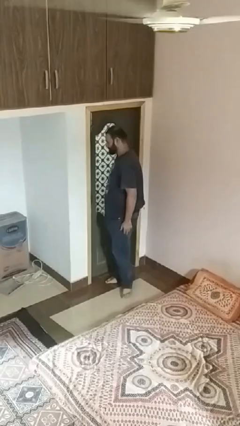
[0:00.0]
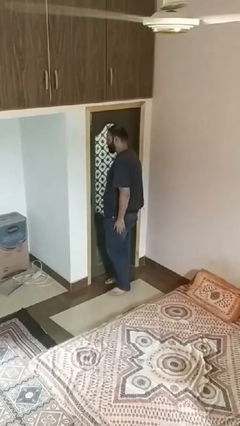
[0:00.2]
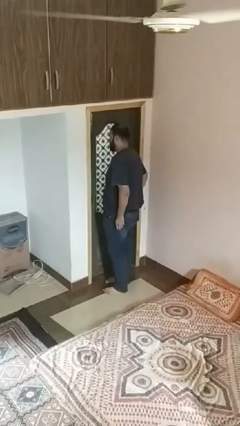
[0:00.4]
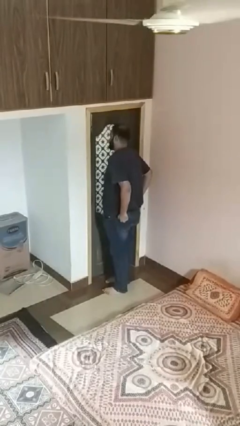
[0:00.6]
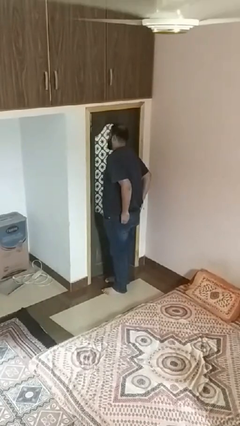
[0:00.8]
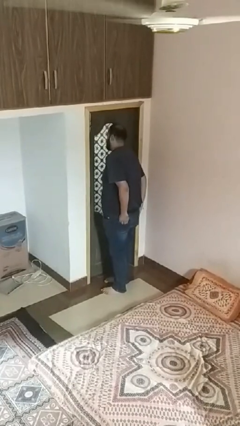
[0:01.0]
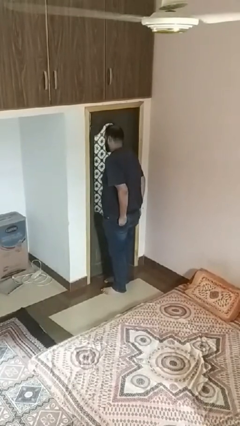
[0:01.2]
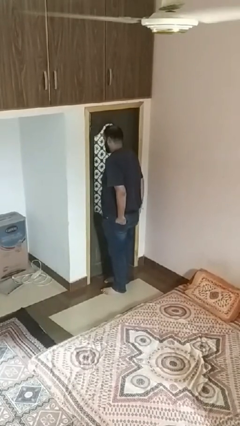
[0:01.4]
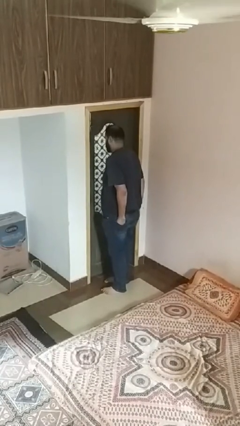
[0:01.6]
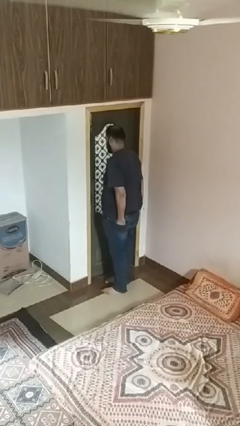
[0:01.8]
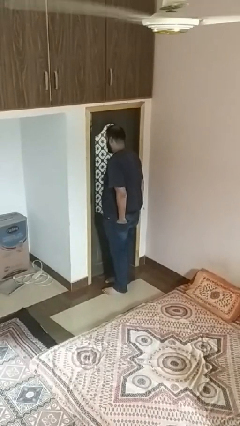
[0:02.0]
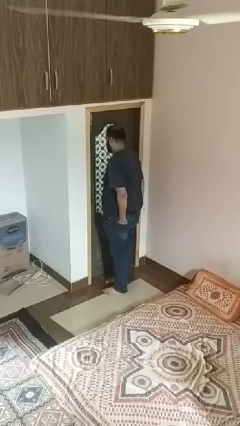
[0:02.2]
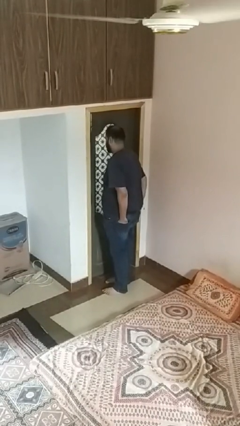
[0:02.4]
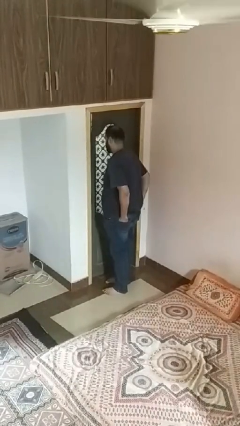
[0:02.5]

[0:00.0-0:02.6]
person puts hands in back pockets

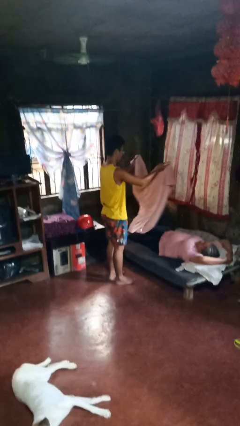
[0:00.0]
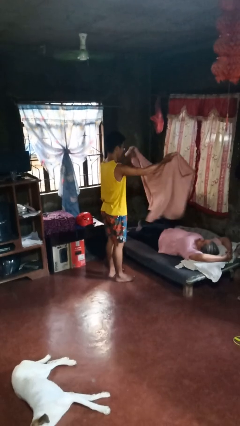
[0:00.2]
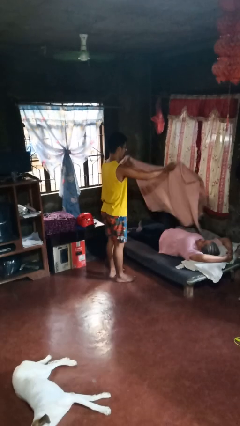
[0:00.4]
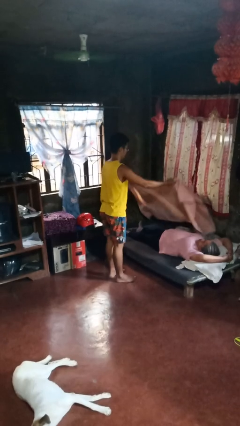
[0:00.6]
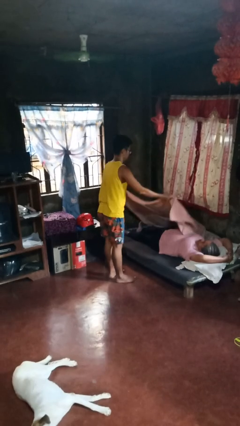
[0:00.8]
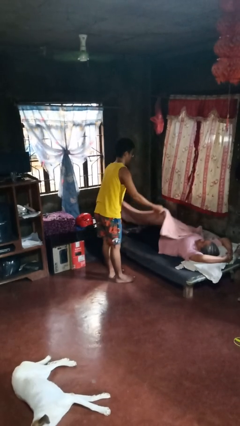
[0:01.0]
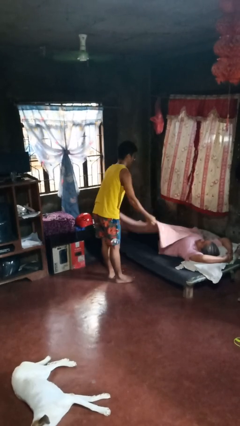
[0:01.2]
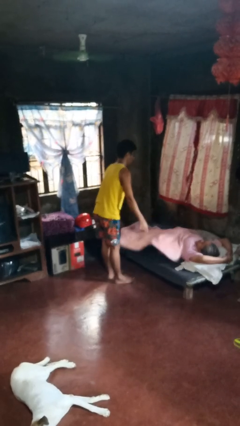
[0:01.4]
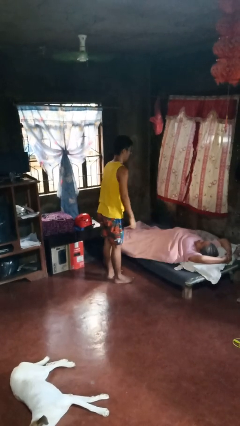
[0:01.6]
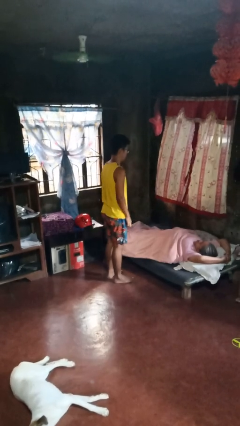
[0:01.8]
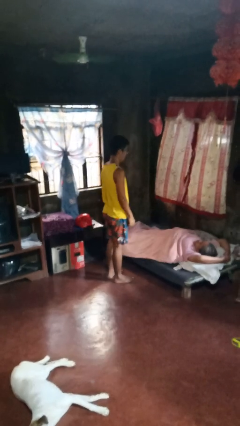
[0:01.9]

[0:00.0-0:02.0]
person covers friend with blanket

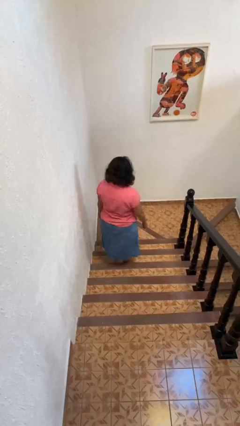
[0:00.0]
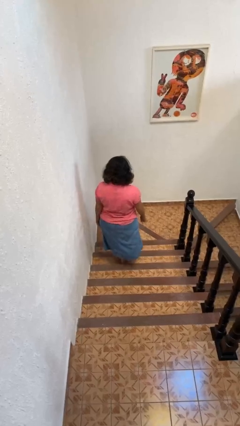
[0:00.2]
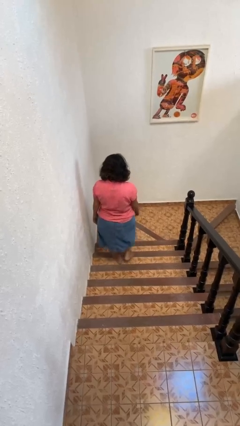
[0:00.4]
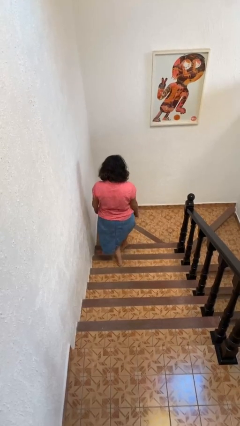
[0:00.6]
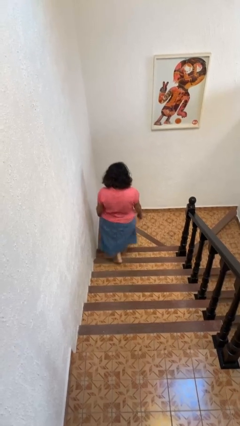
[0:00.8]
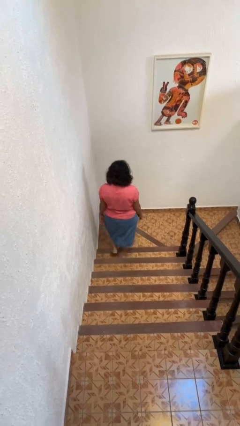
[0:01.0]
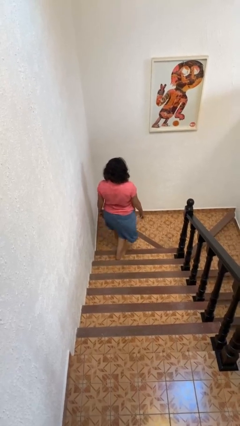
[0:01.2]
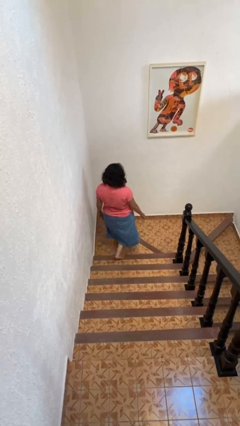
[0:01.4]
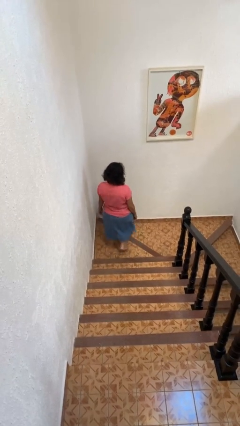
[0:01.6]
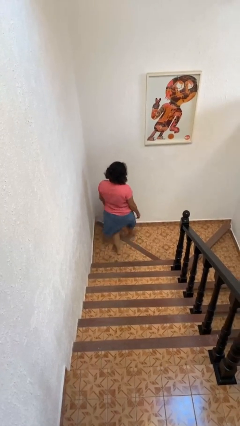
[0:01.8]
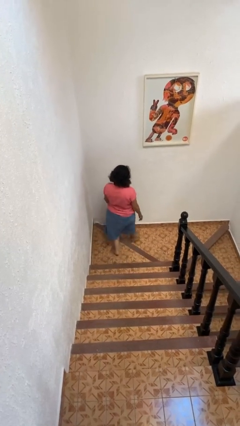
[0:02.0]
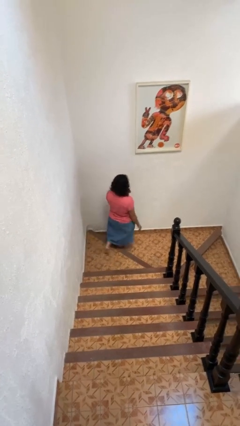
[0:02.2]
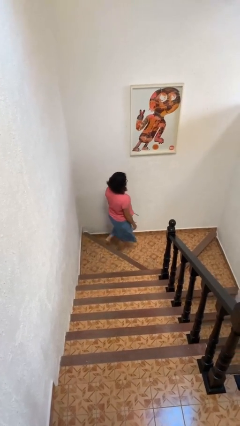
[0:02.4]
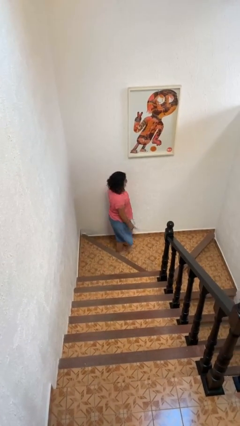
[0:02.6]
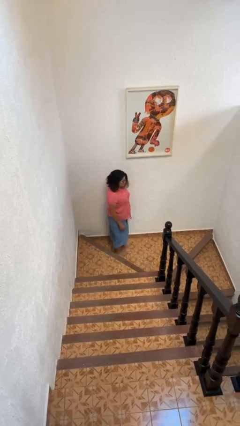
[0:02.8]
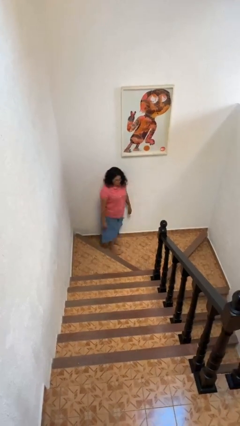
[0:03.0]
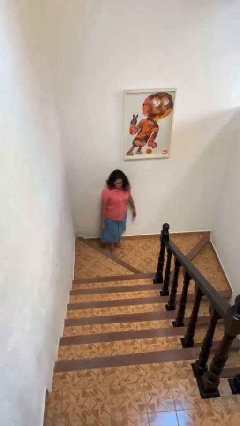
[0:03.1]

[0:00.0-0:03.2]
person climbs down stairs

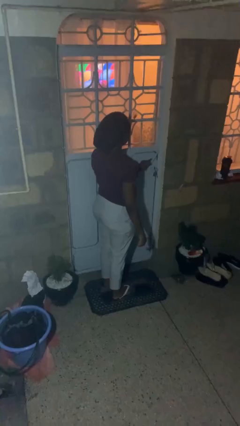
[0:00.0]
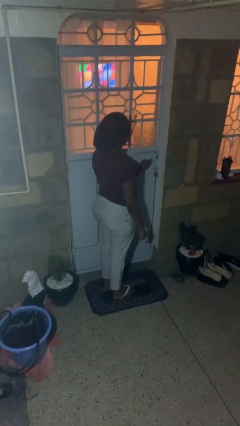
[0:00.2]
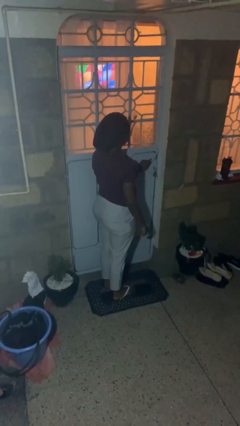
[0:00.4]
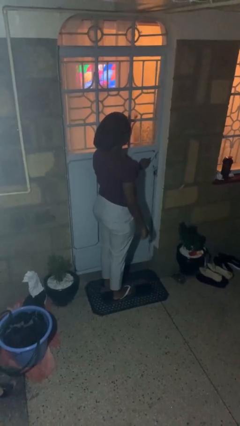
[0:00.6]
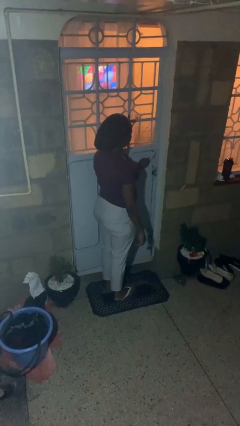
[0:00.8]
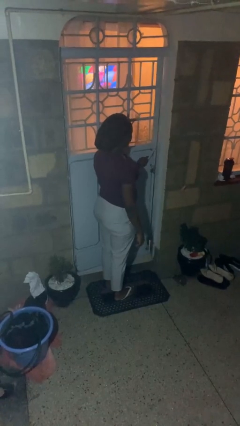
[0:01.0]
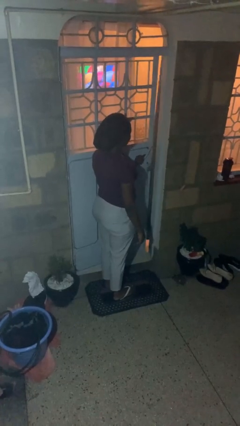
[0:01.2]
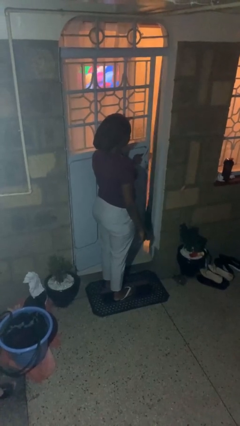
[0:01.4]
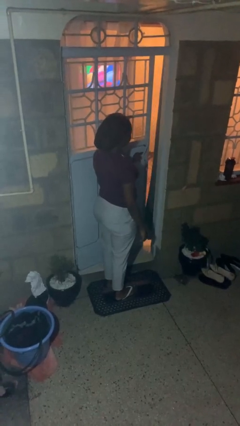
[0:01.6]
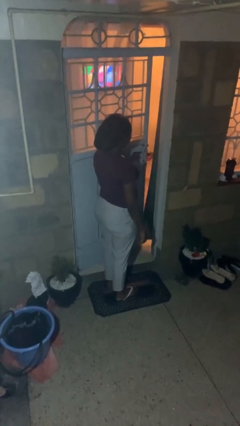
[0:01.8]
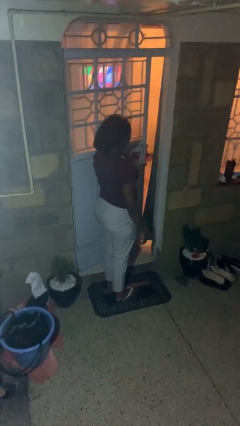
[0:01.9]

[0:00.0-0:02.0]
person opens facility door

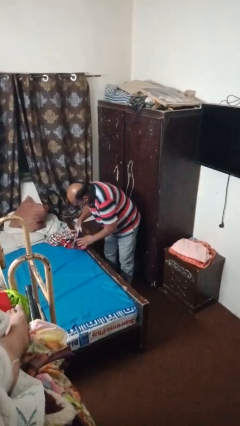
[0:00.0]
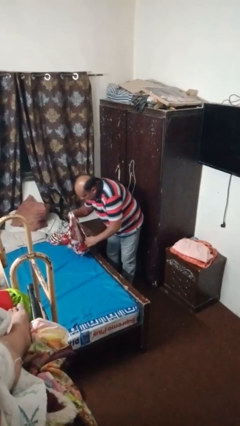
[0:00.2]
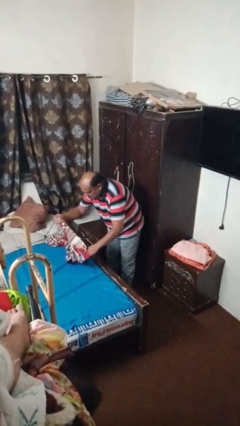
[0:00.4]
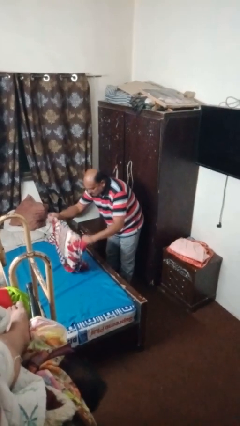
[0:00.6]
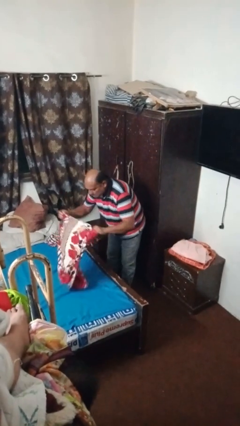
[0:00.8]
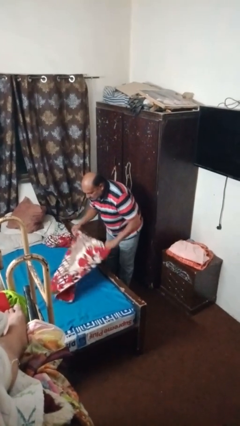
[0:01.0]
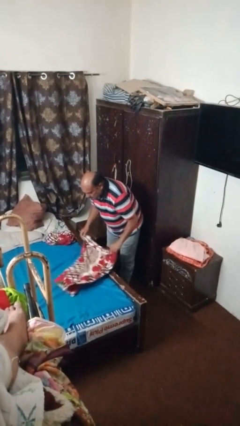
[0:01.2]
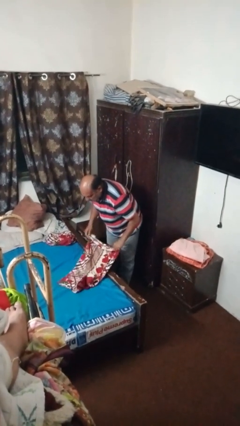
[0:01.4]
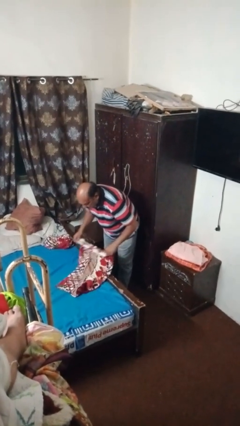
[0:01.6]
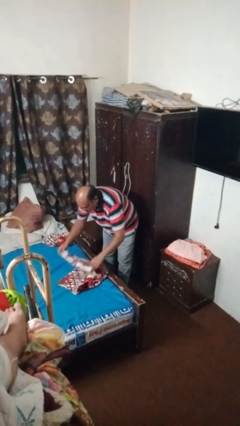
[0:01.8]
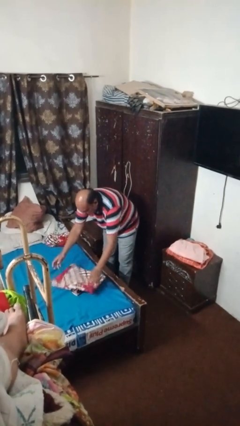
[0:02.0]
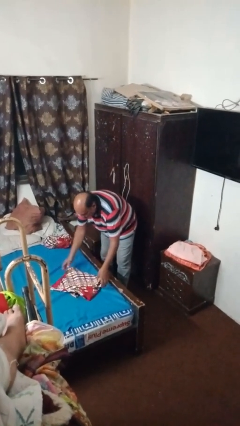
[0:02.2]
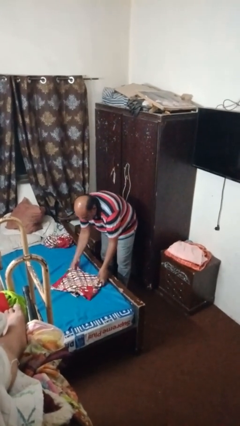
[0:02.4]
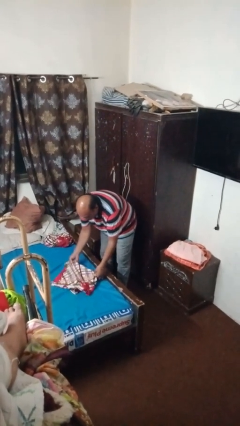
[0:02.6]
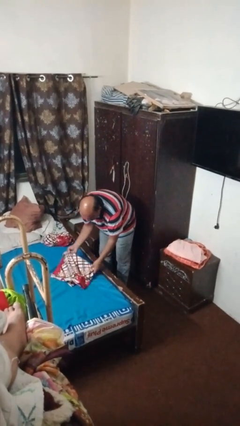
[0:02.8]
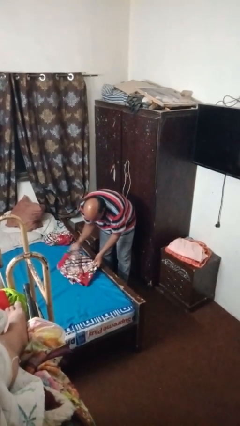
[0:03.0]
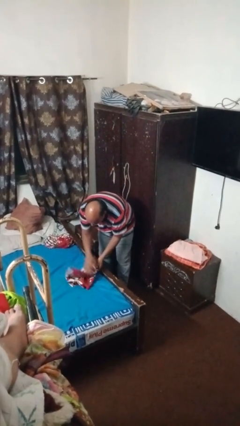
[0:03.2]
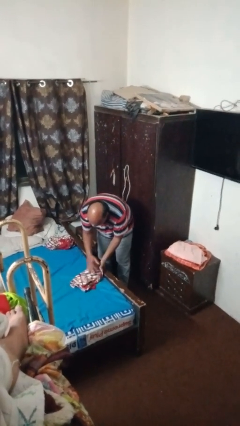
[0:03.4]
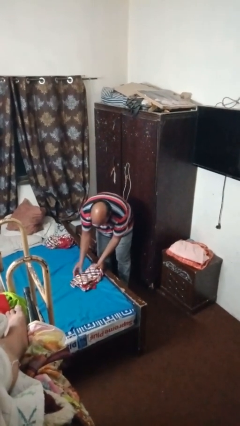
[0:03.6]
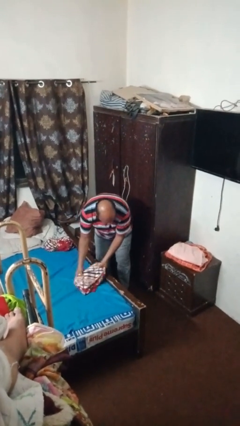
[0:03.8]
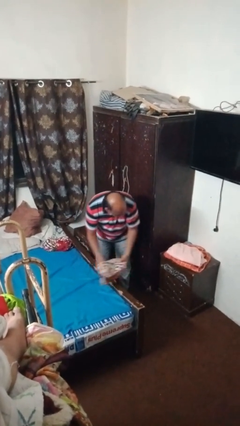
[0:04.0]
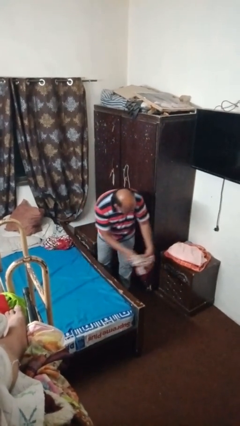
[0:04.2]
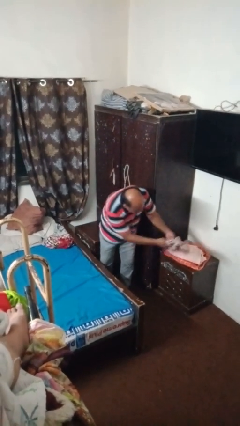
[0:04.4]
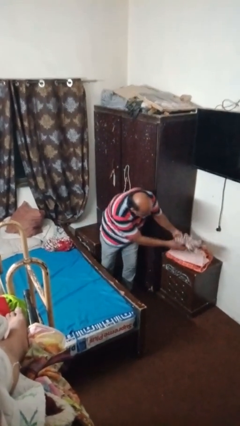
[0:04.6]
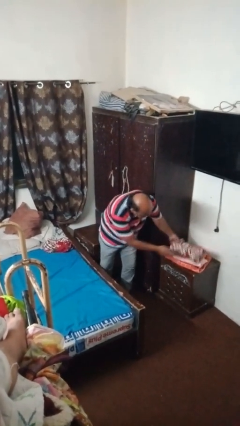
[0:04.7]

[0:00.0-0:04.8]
person folds towel

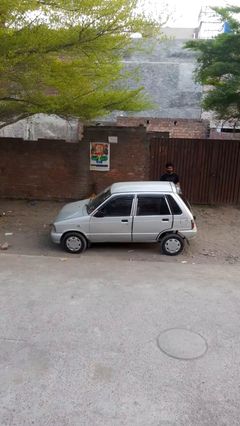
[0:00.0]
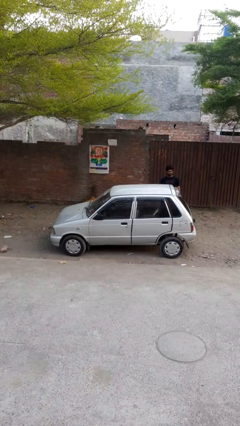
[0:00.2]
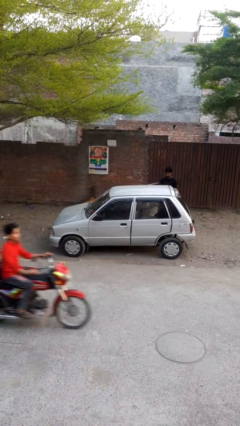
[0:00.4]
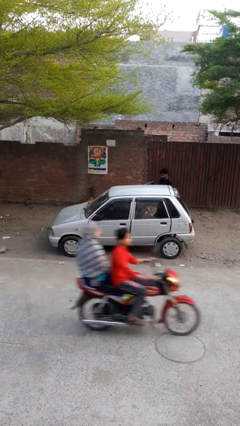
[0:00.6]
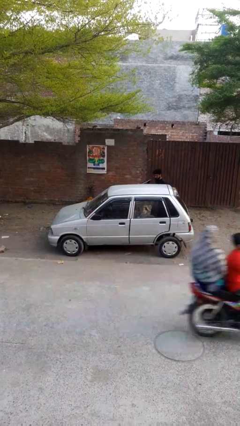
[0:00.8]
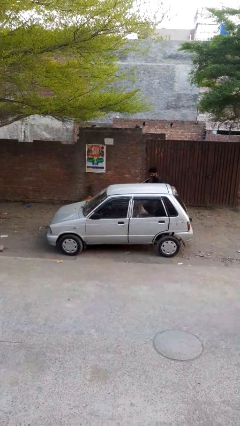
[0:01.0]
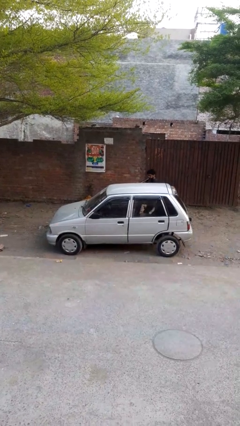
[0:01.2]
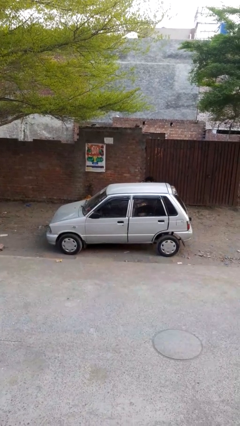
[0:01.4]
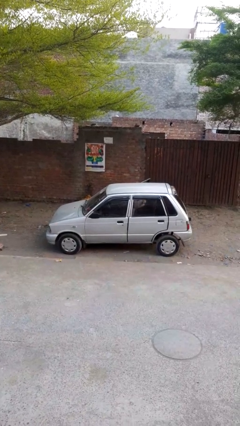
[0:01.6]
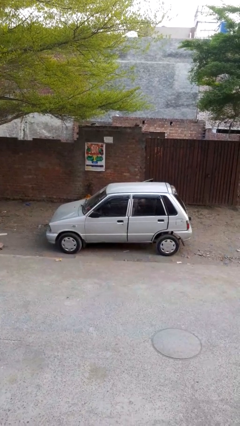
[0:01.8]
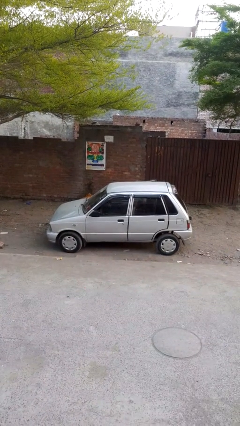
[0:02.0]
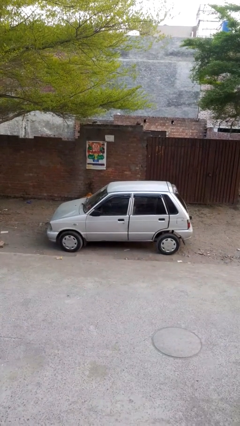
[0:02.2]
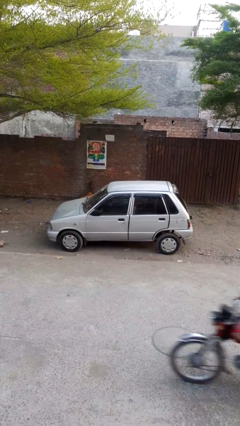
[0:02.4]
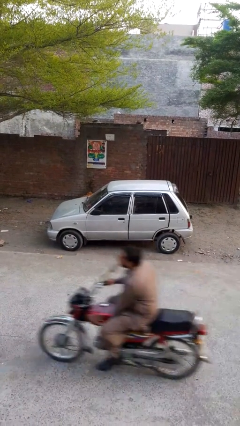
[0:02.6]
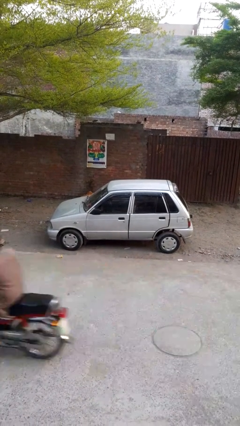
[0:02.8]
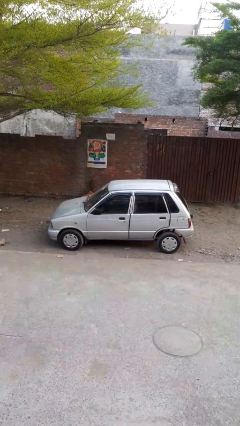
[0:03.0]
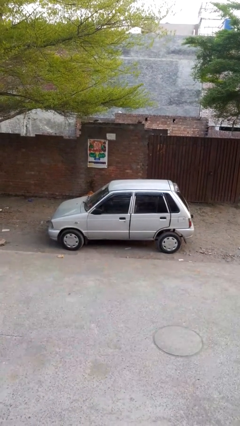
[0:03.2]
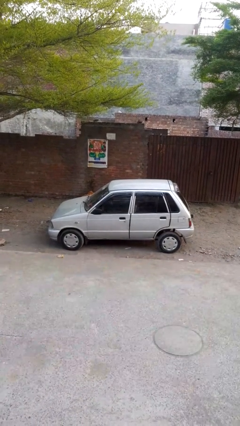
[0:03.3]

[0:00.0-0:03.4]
car picks up person
